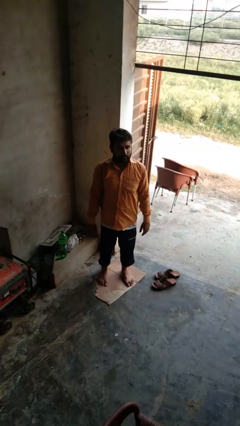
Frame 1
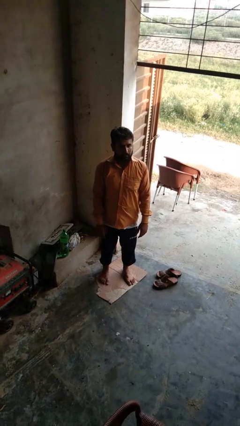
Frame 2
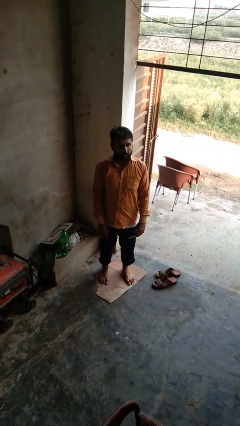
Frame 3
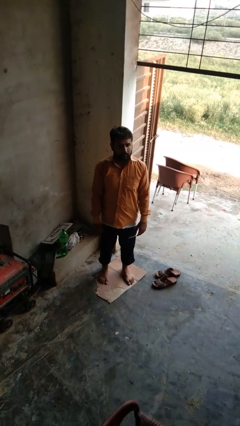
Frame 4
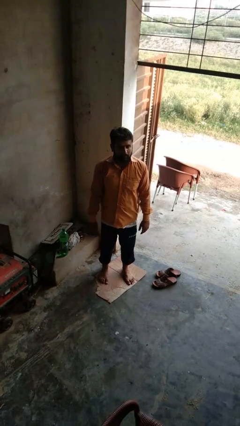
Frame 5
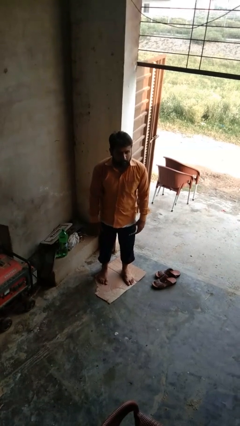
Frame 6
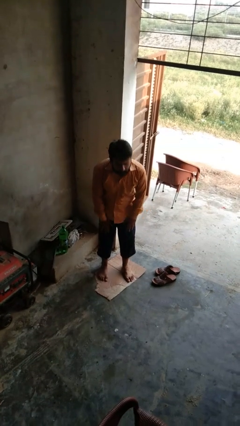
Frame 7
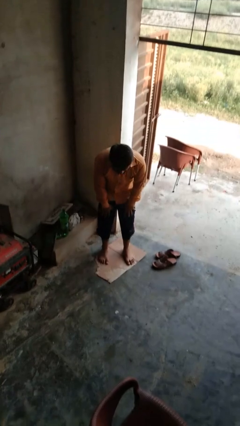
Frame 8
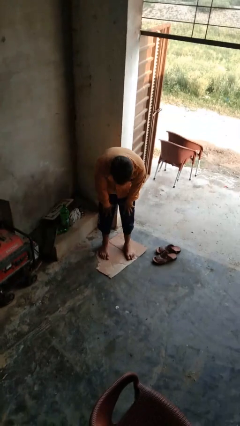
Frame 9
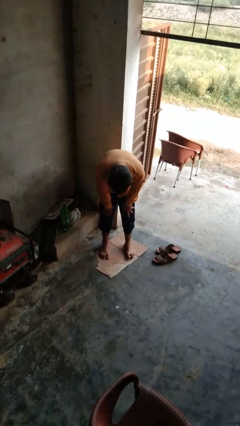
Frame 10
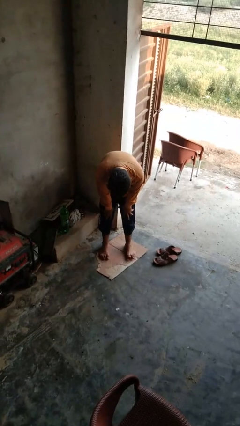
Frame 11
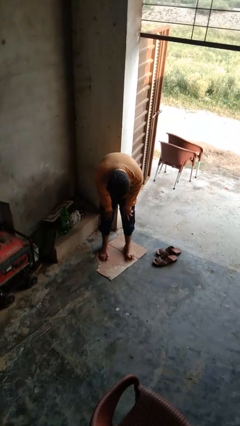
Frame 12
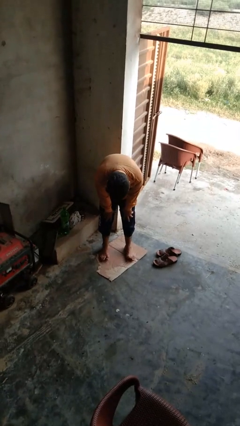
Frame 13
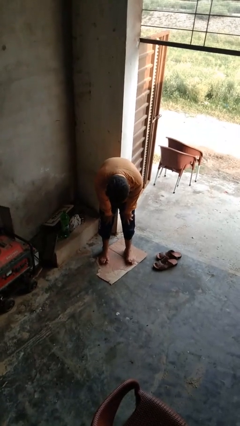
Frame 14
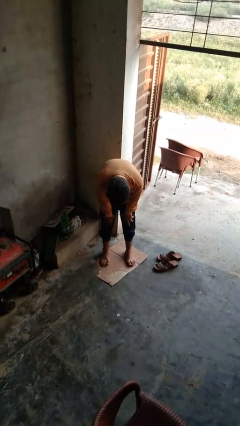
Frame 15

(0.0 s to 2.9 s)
person bows

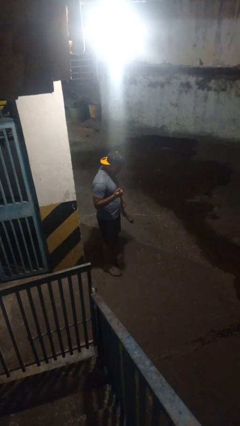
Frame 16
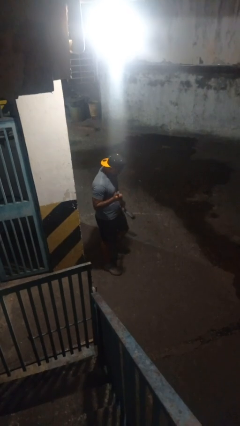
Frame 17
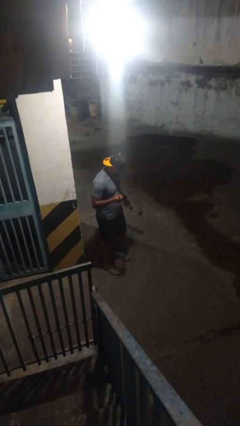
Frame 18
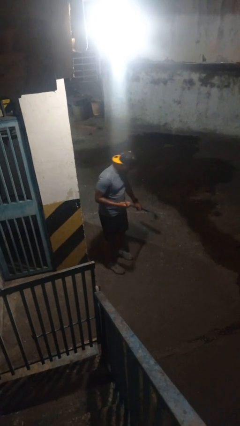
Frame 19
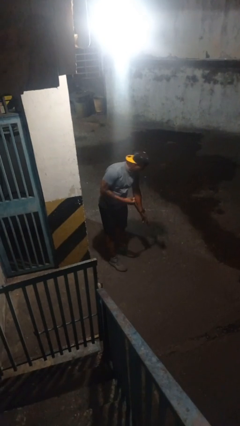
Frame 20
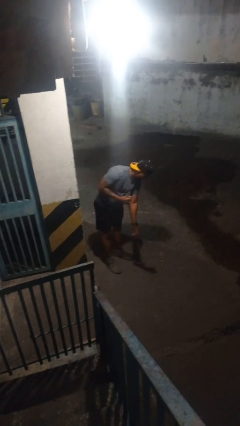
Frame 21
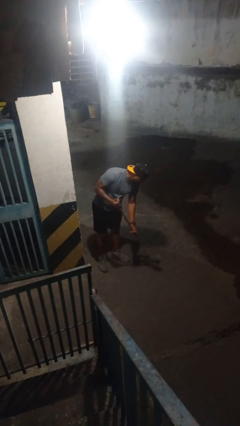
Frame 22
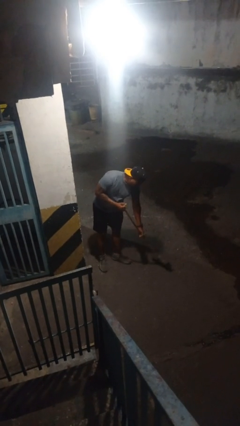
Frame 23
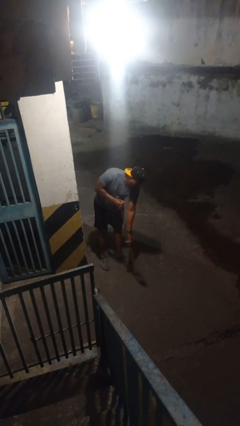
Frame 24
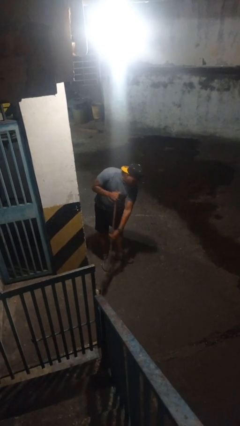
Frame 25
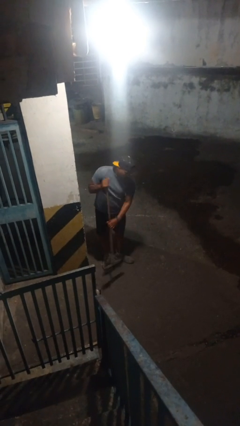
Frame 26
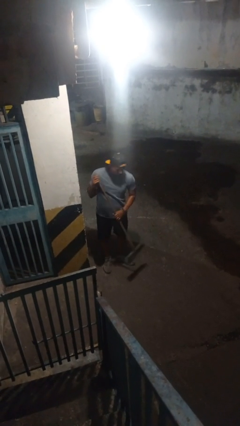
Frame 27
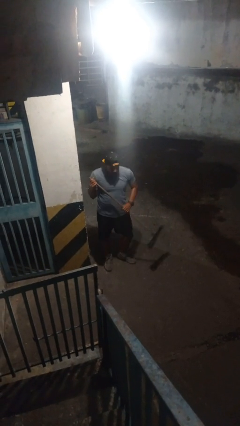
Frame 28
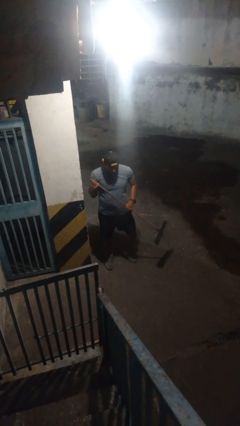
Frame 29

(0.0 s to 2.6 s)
person sweeps floor

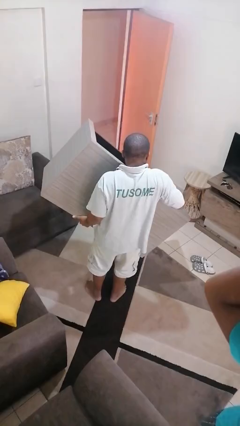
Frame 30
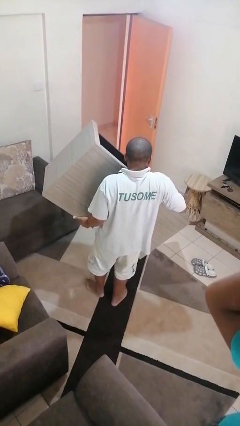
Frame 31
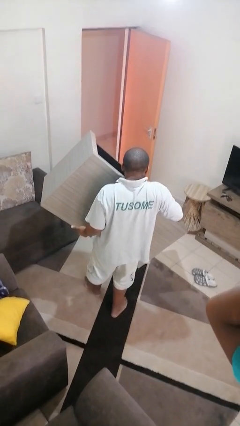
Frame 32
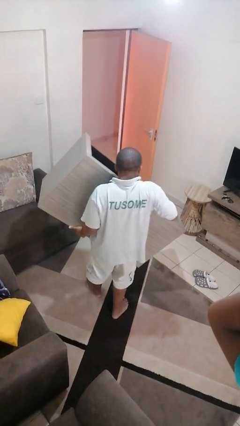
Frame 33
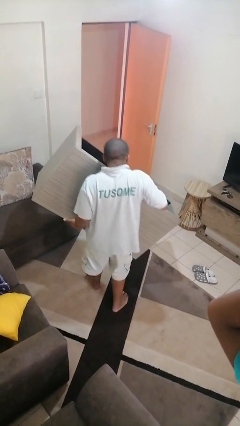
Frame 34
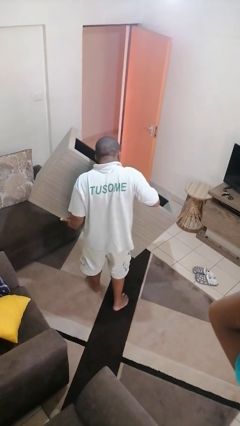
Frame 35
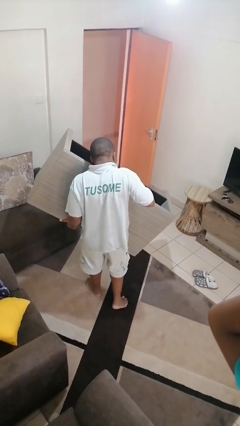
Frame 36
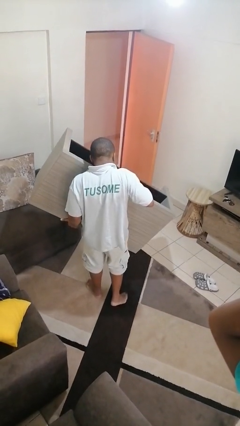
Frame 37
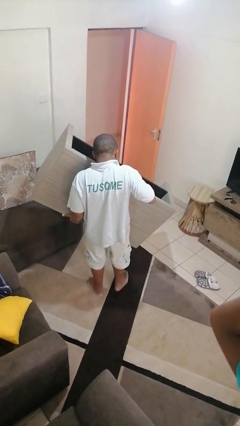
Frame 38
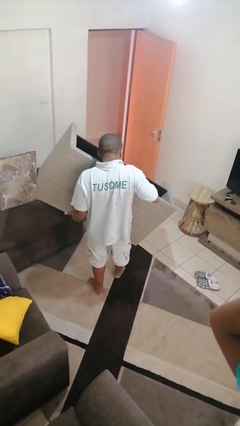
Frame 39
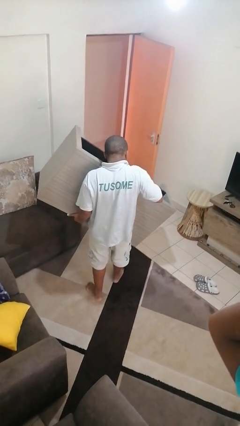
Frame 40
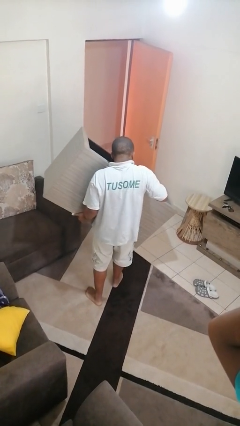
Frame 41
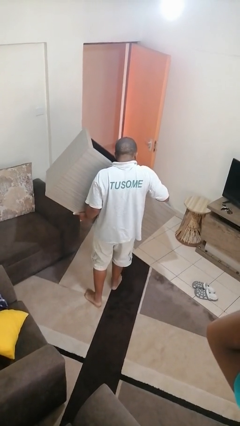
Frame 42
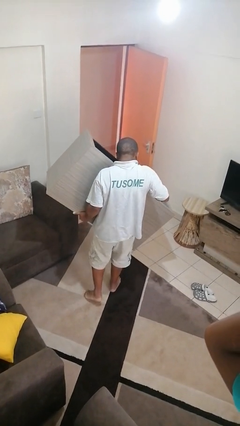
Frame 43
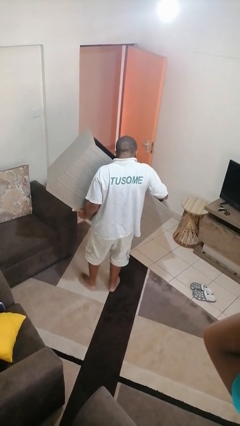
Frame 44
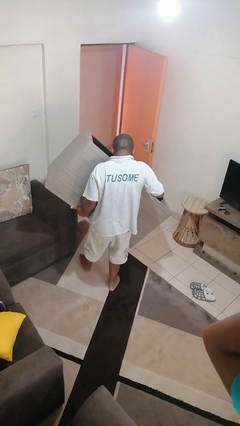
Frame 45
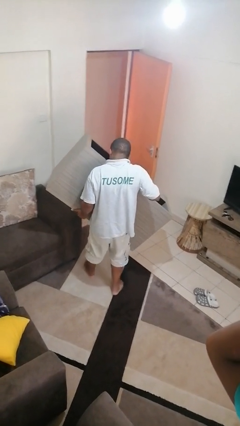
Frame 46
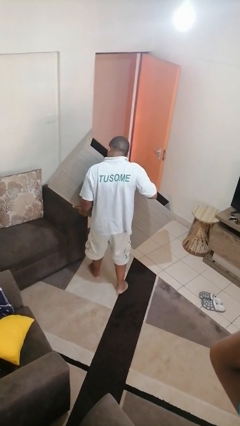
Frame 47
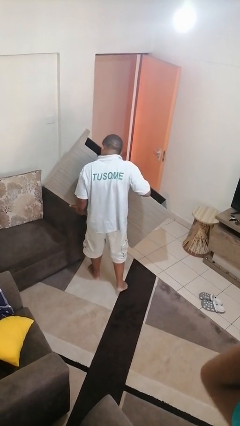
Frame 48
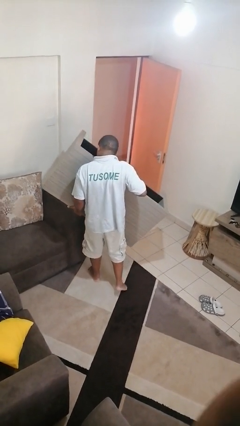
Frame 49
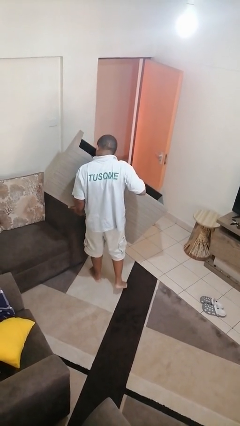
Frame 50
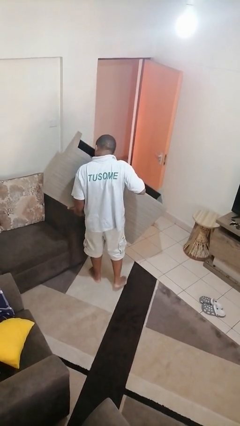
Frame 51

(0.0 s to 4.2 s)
person carries furniture

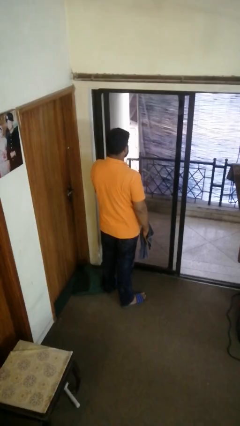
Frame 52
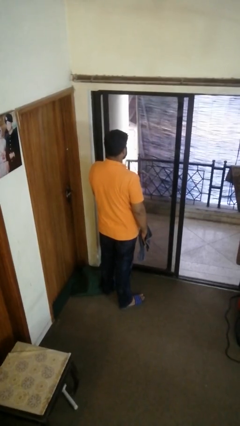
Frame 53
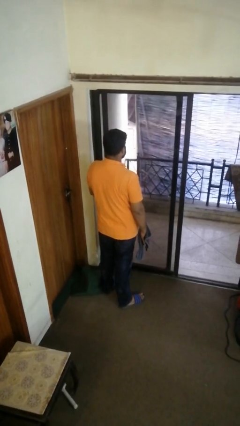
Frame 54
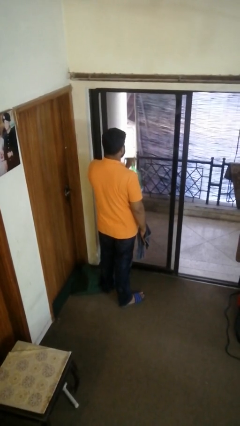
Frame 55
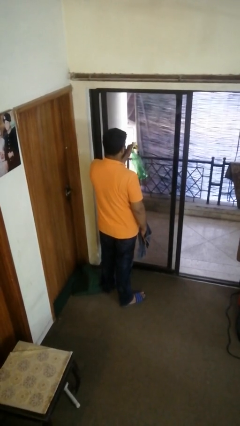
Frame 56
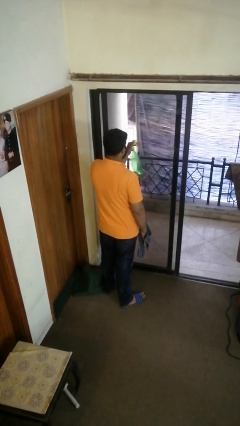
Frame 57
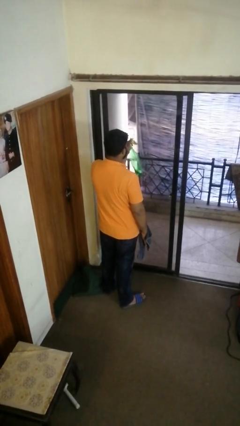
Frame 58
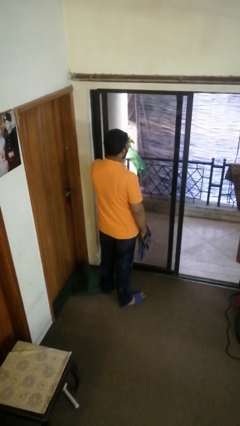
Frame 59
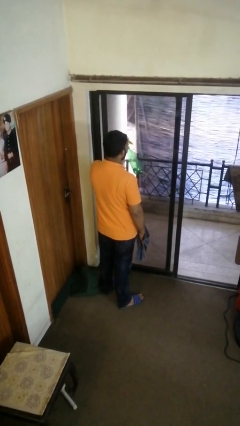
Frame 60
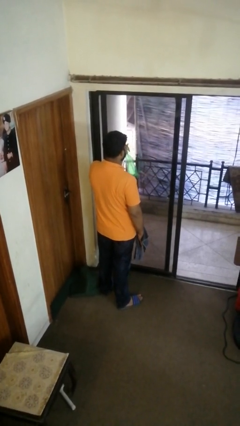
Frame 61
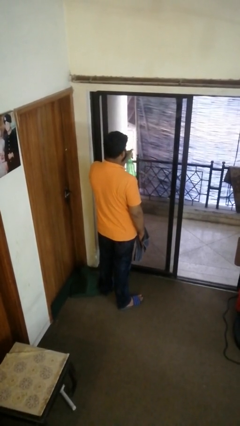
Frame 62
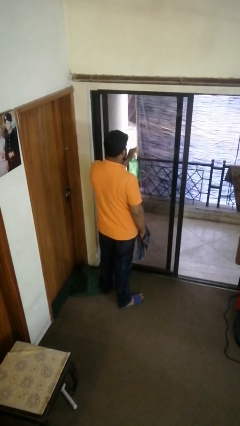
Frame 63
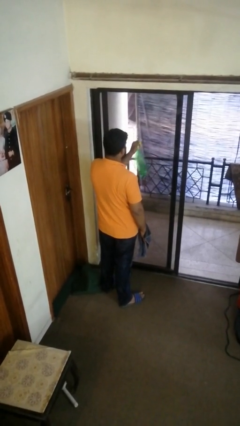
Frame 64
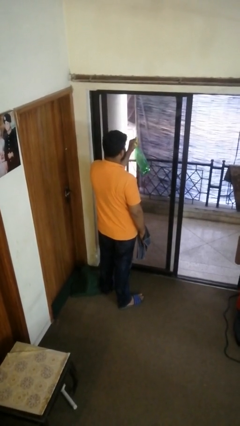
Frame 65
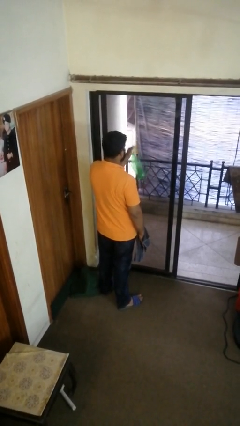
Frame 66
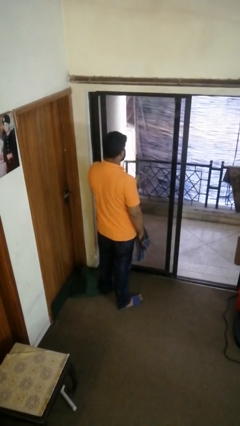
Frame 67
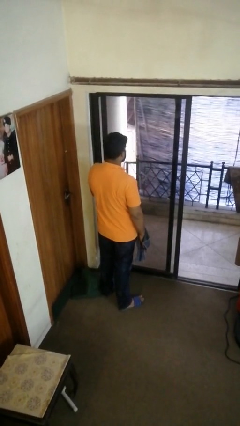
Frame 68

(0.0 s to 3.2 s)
person sprays from bottle

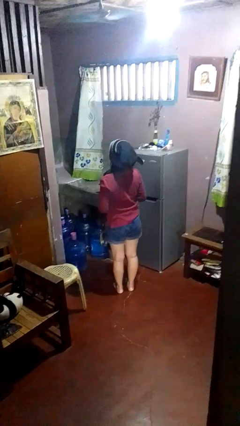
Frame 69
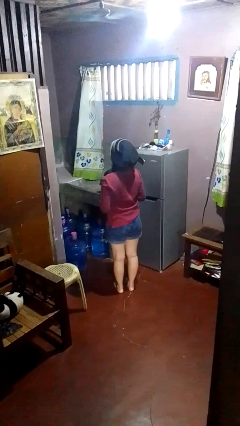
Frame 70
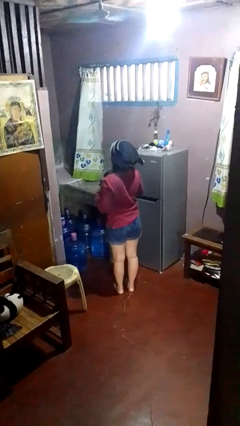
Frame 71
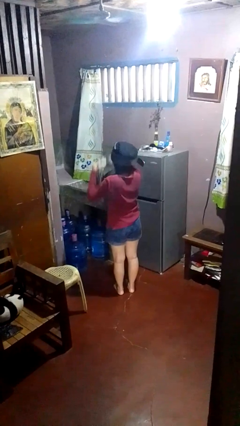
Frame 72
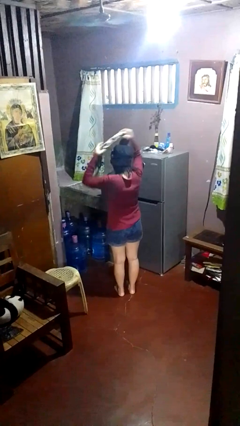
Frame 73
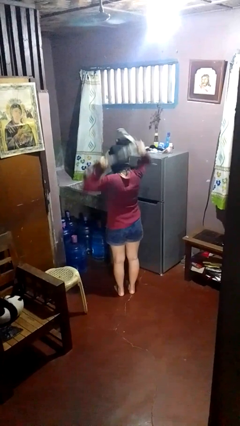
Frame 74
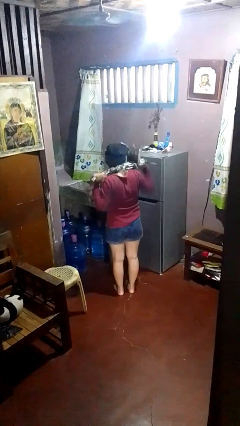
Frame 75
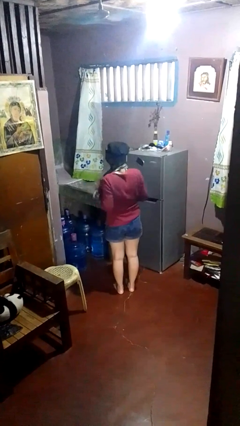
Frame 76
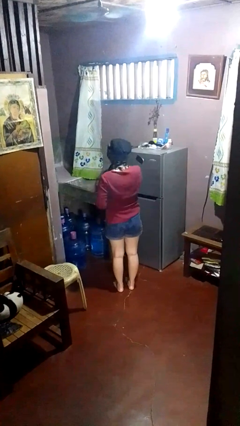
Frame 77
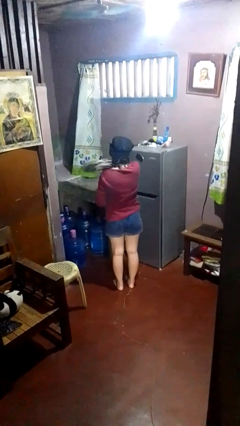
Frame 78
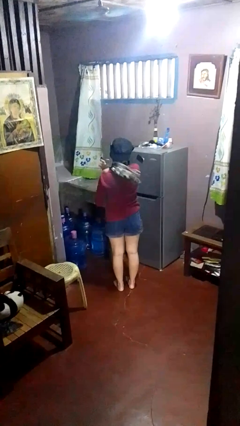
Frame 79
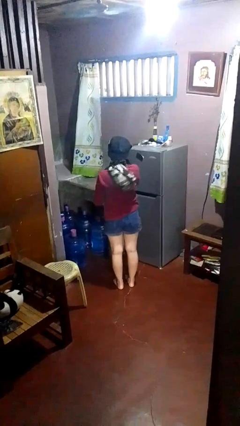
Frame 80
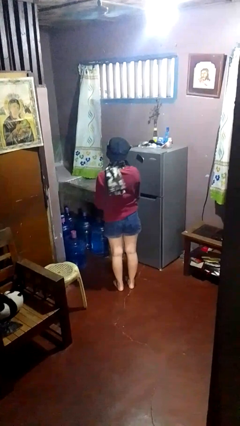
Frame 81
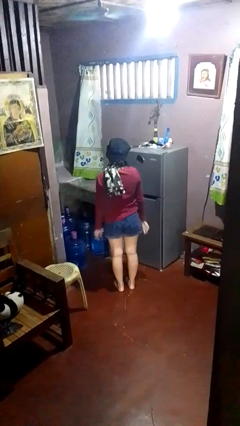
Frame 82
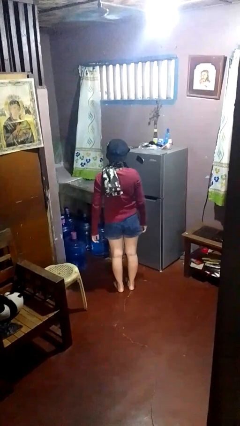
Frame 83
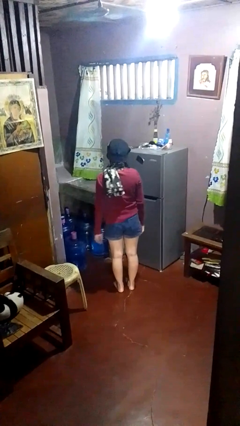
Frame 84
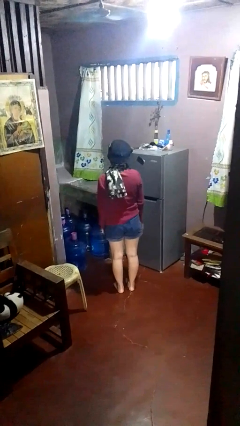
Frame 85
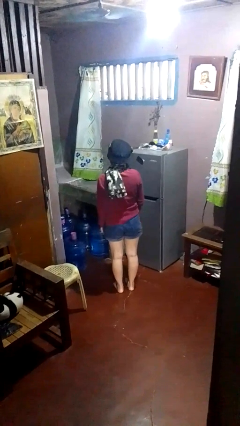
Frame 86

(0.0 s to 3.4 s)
person puts on scarf

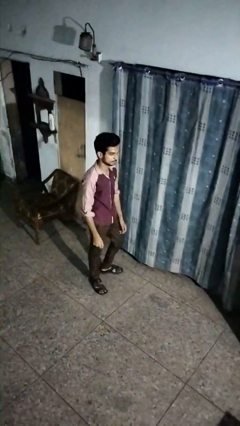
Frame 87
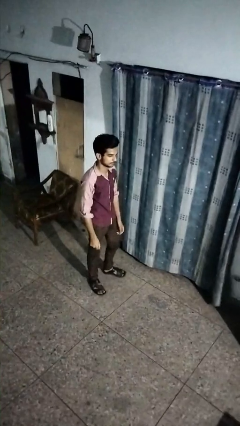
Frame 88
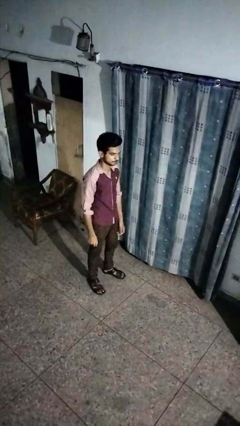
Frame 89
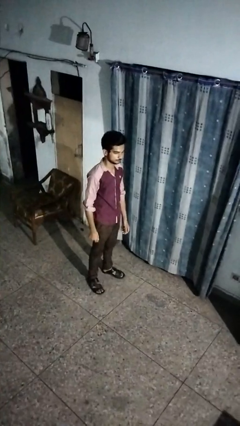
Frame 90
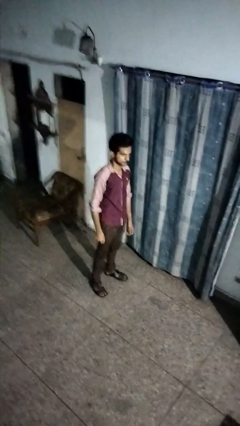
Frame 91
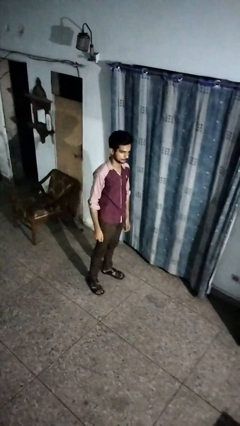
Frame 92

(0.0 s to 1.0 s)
person opens curtains
